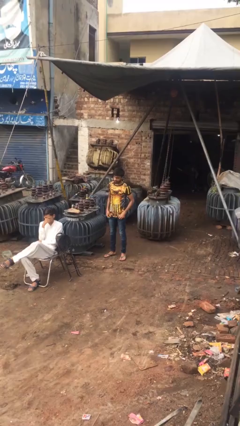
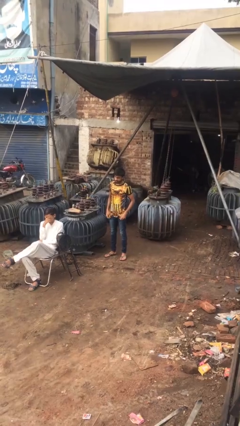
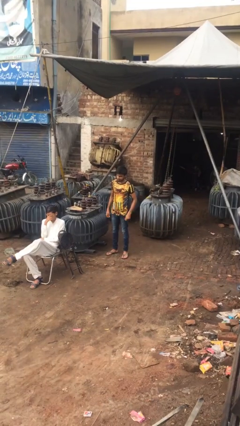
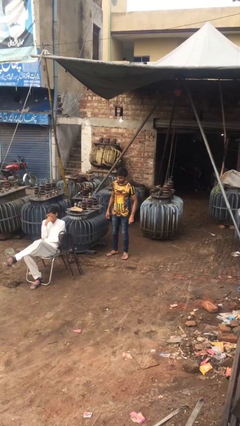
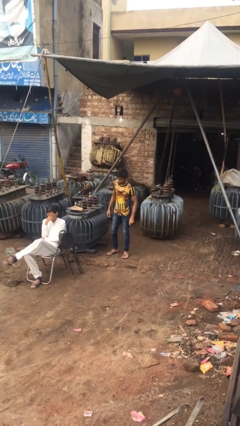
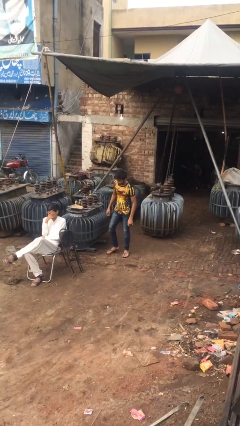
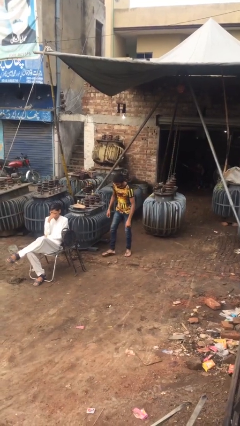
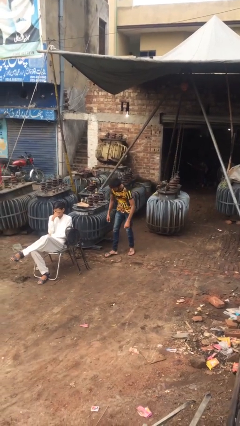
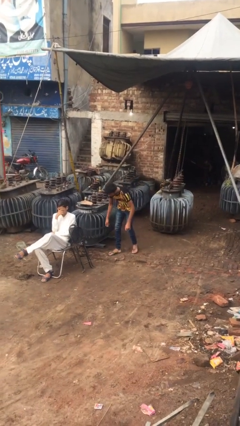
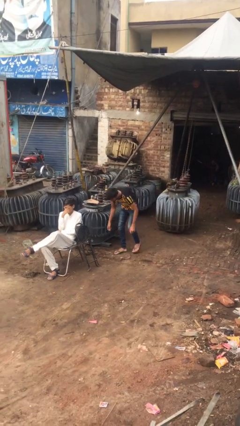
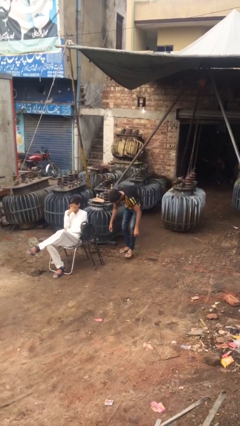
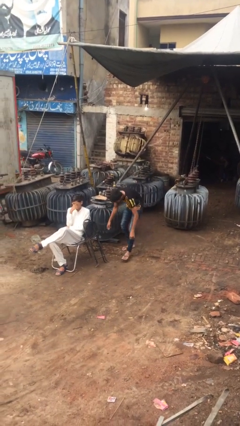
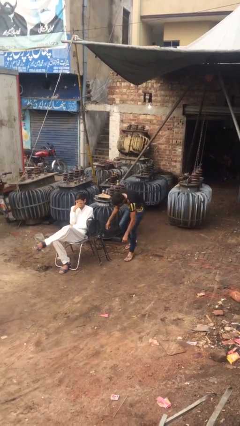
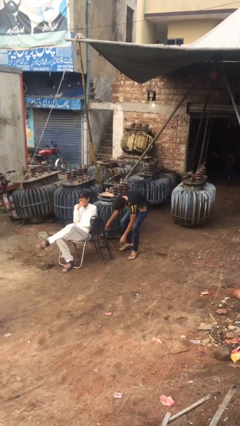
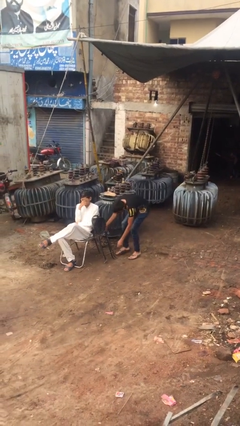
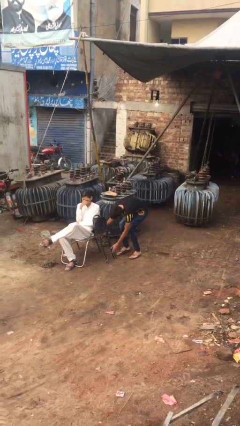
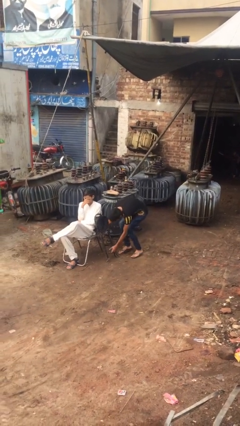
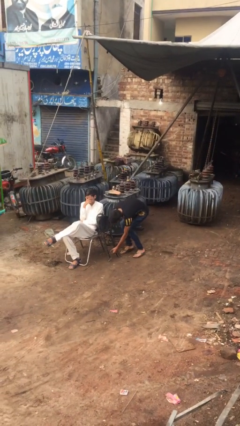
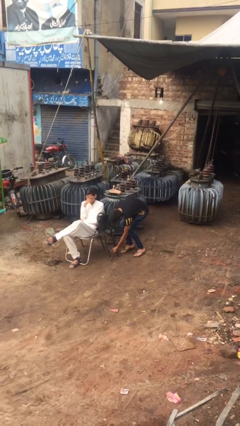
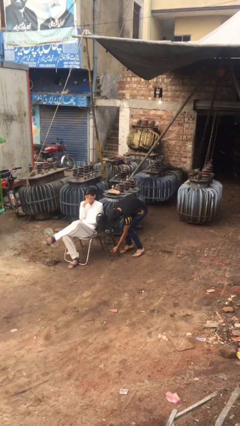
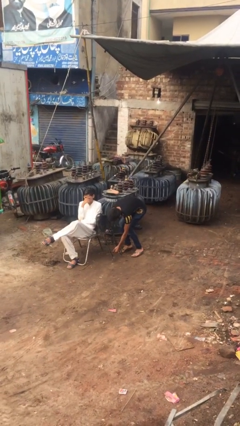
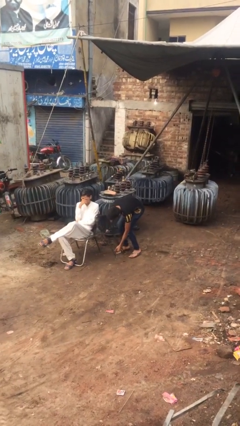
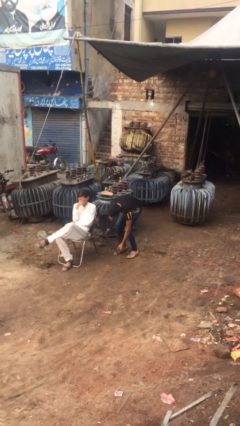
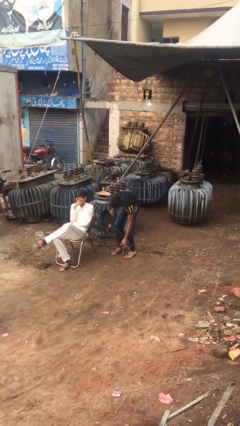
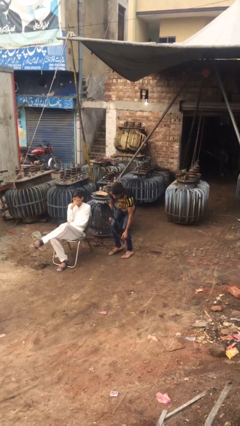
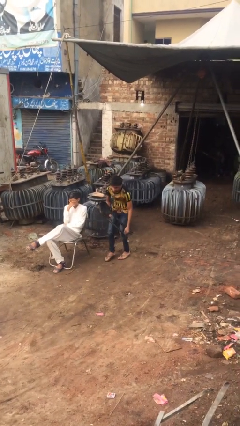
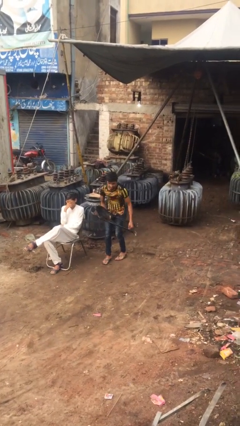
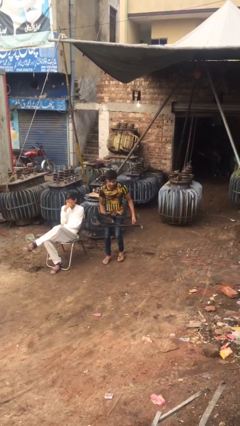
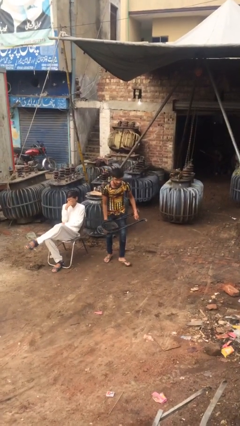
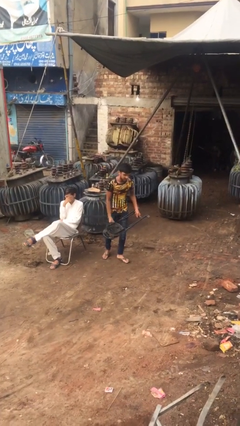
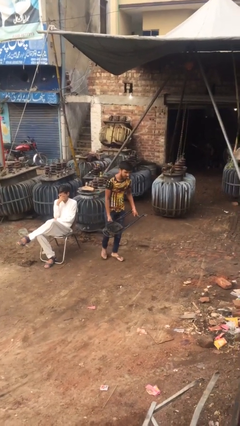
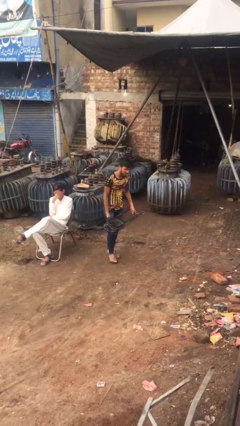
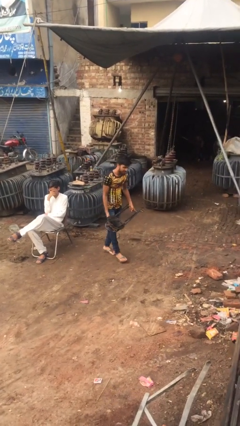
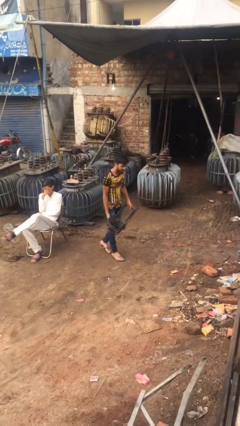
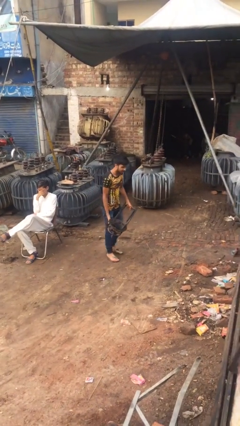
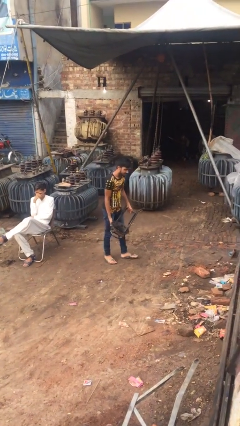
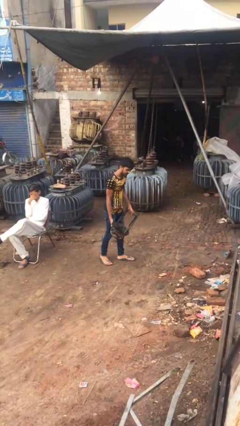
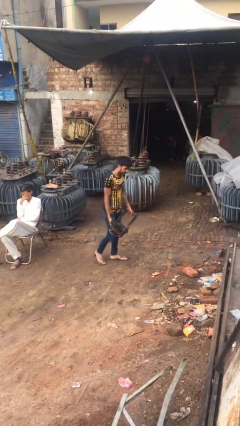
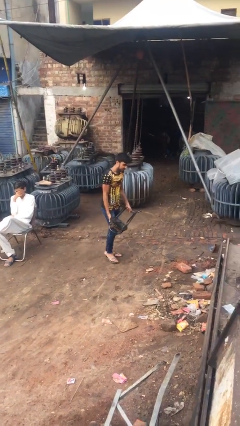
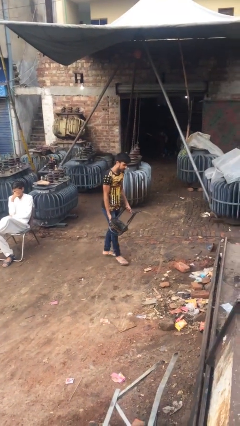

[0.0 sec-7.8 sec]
person steals object from person

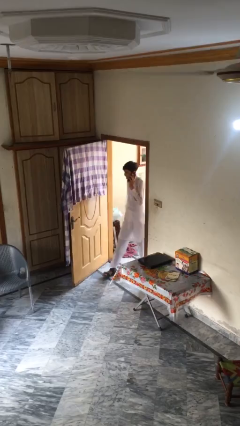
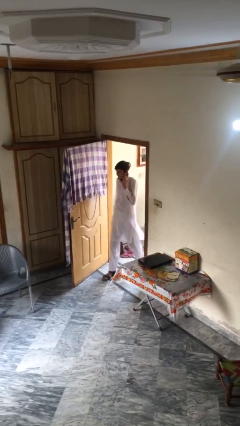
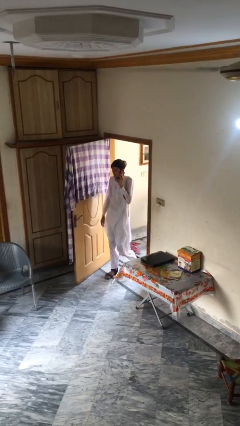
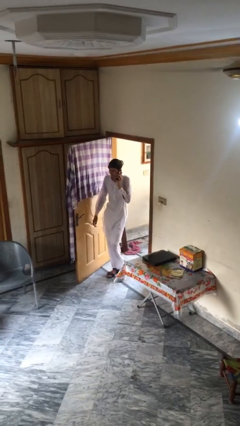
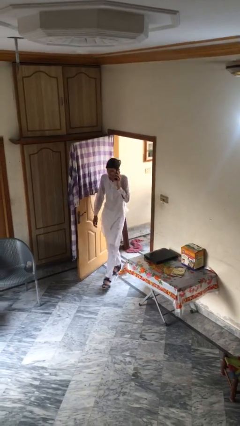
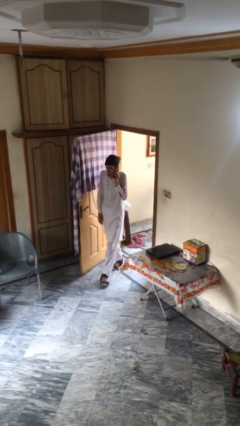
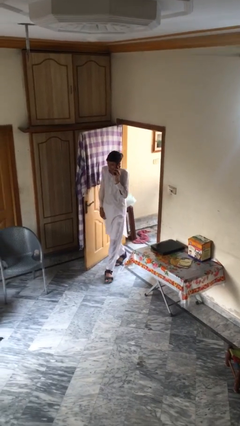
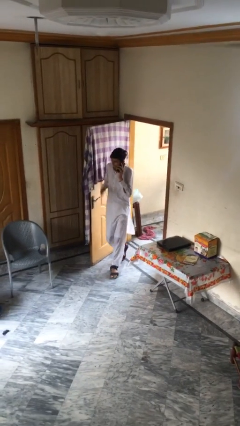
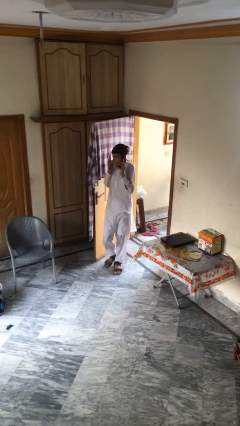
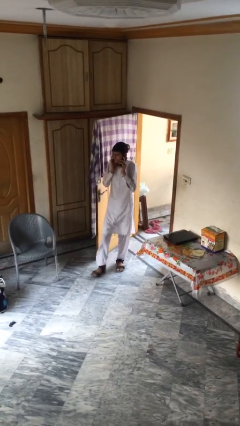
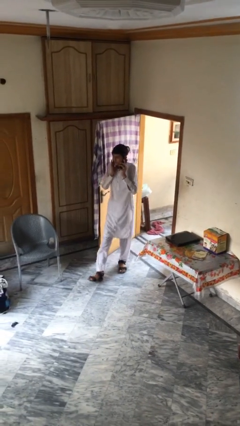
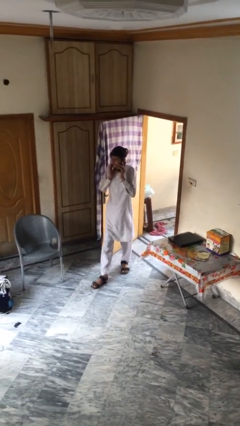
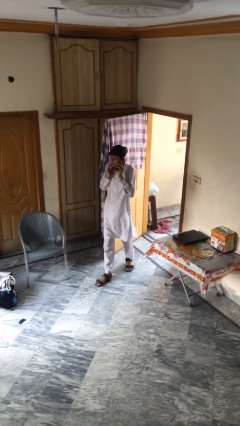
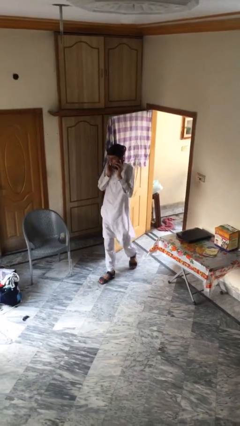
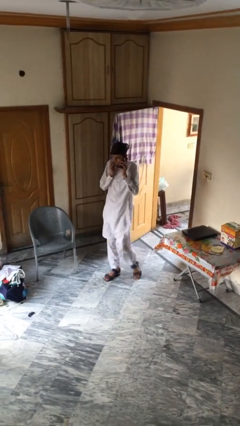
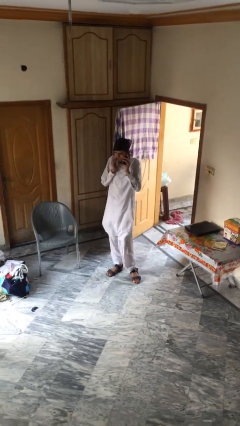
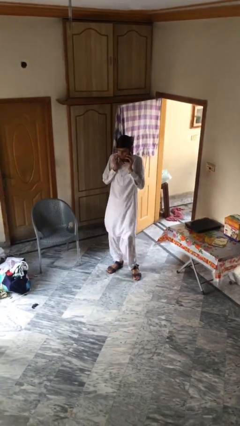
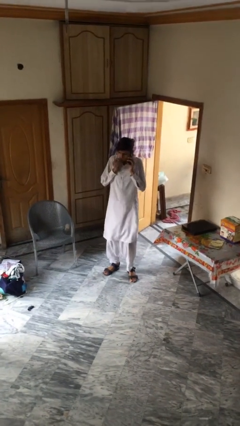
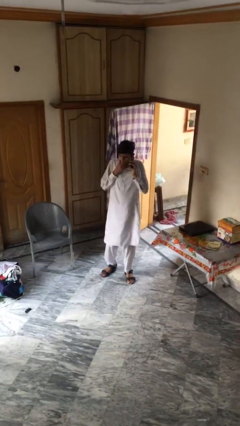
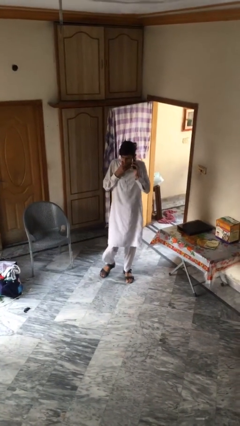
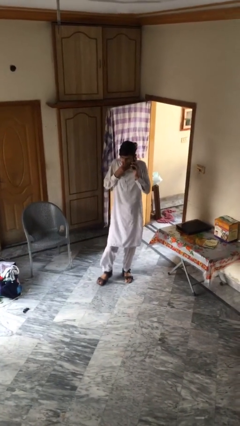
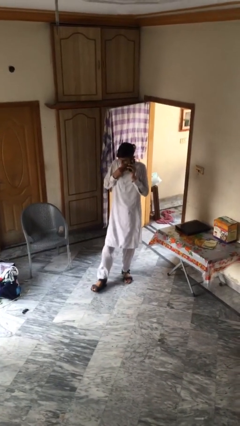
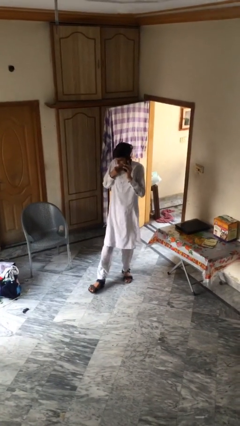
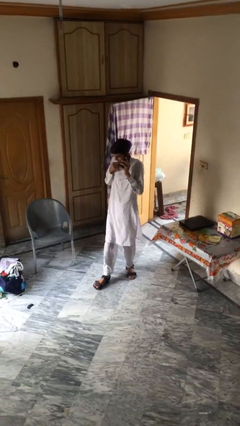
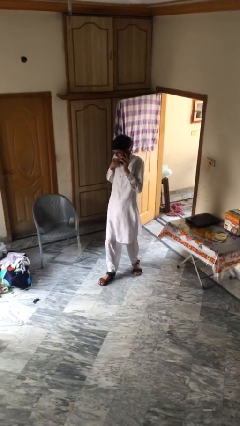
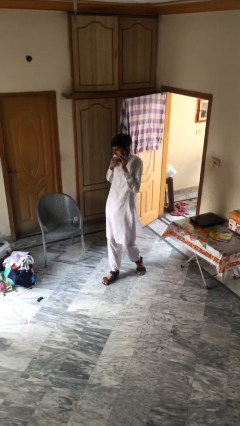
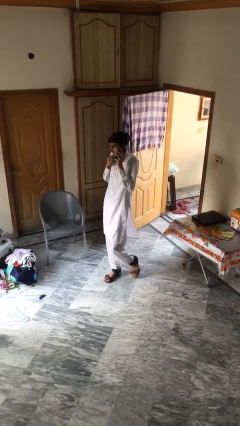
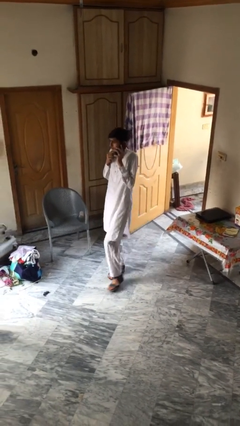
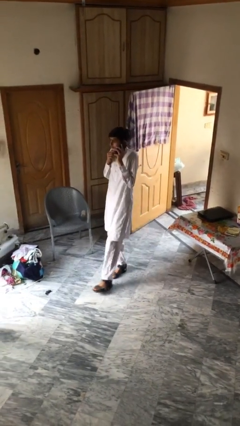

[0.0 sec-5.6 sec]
person enters scene through structure

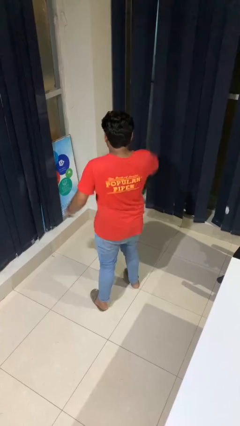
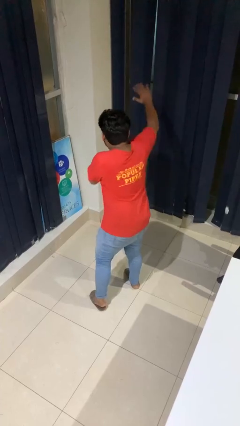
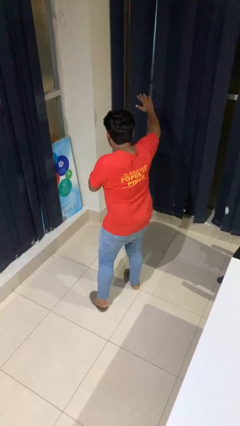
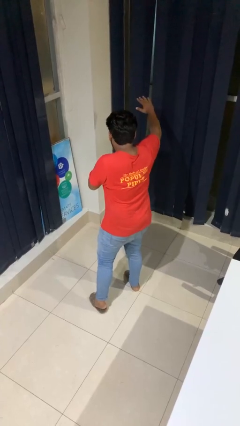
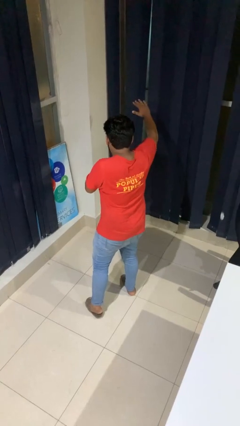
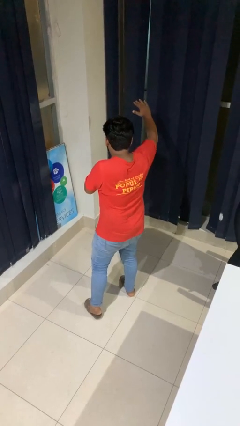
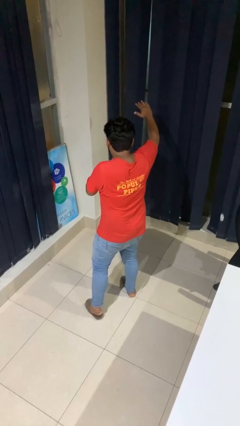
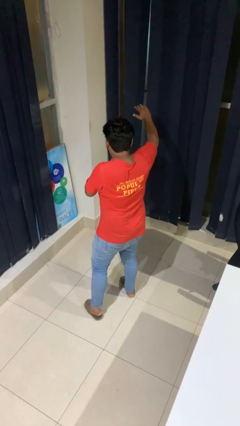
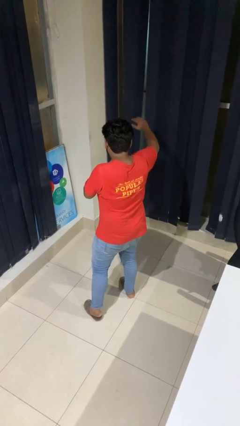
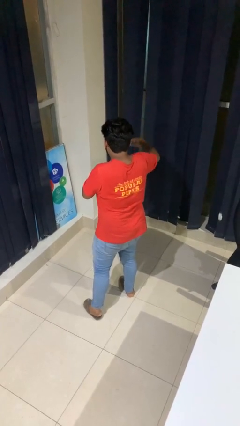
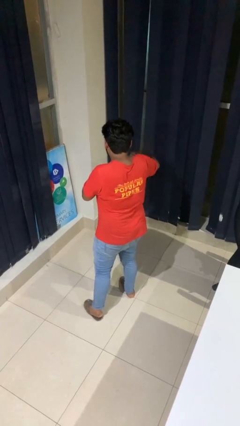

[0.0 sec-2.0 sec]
person karate chop

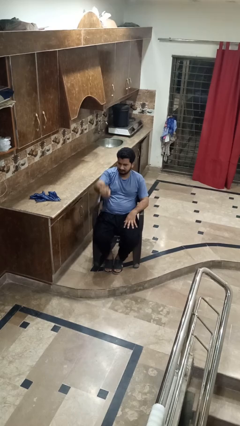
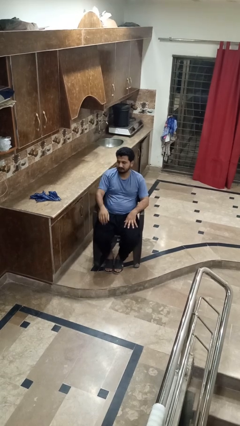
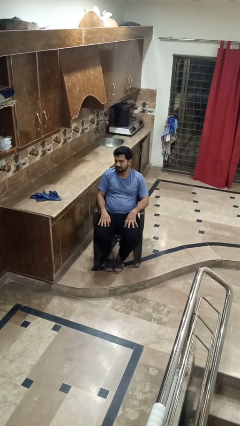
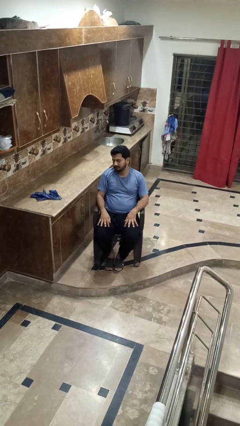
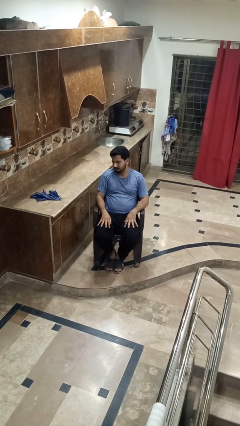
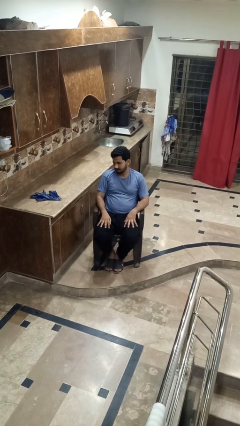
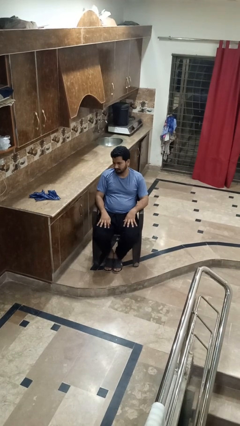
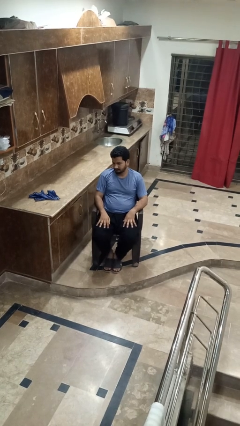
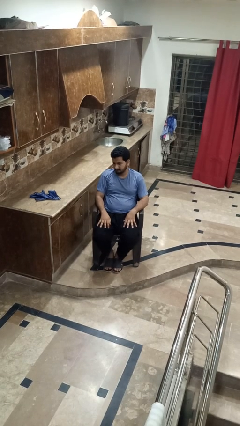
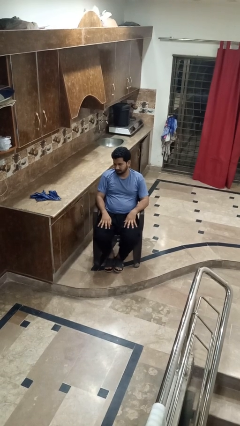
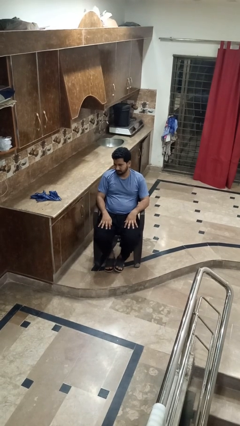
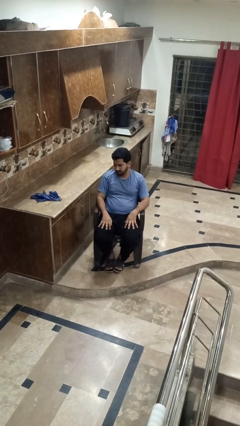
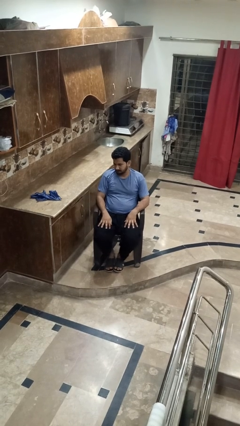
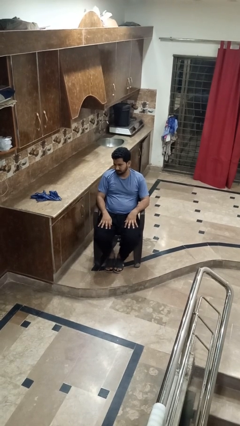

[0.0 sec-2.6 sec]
person gestures lower hand
